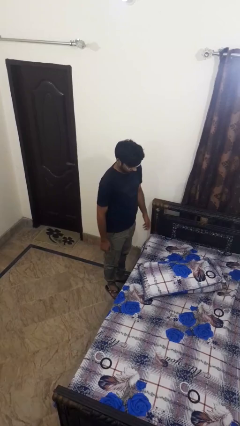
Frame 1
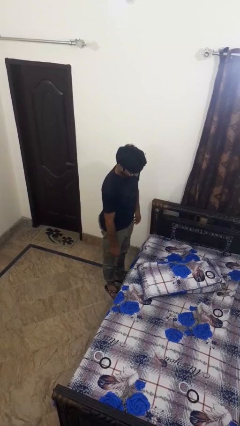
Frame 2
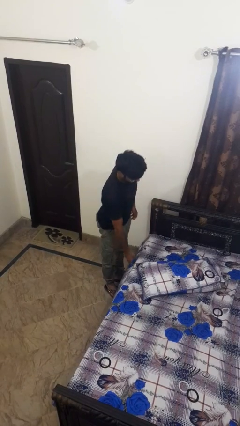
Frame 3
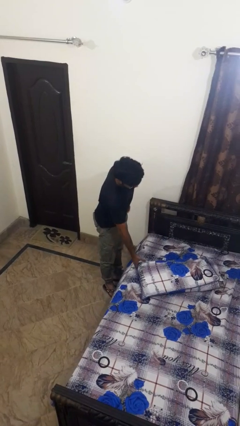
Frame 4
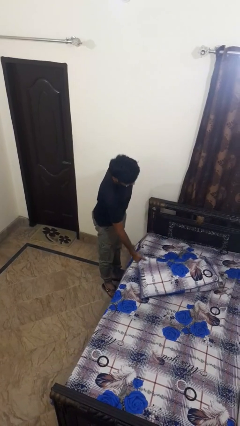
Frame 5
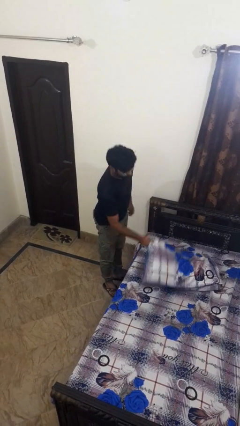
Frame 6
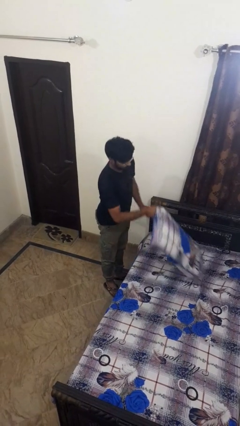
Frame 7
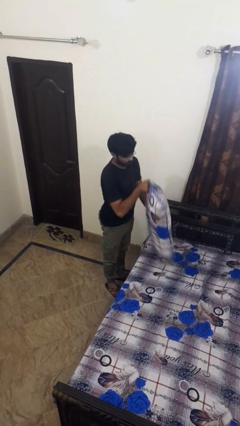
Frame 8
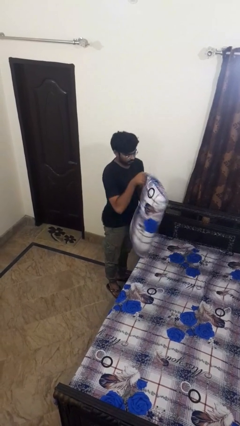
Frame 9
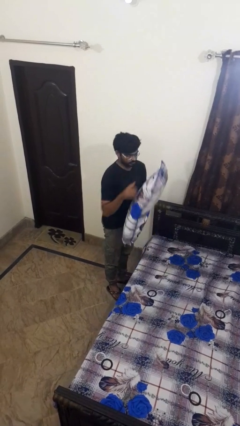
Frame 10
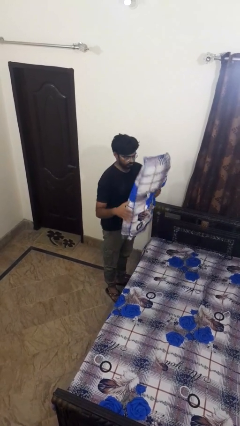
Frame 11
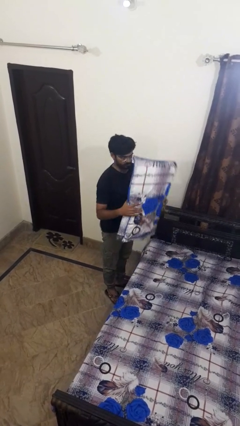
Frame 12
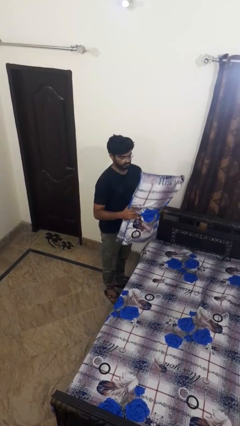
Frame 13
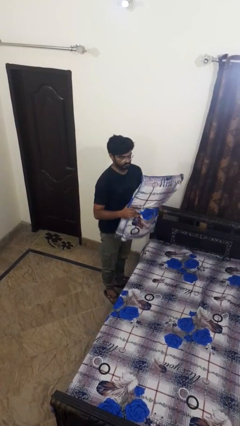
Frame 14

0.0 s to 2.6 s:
person picks up object from bed

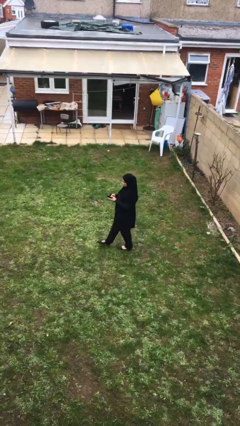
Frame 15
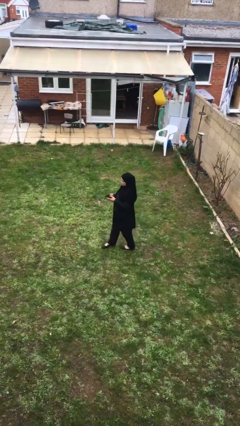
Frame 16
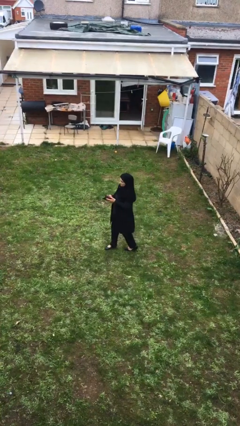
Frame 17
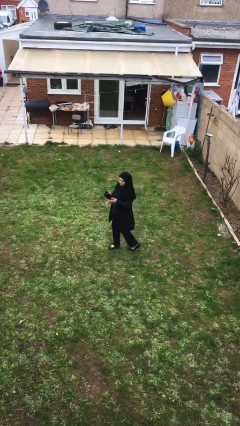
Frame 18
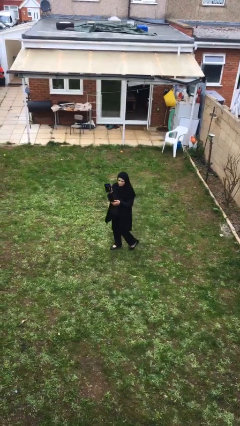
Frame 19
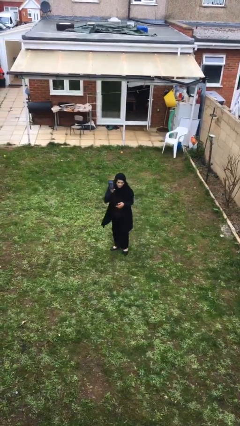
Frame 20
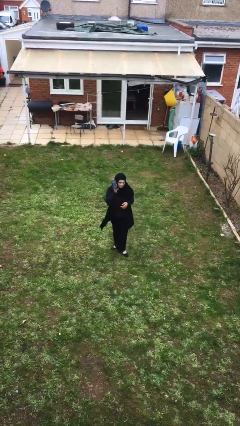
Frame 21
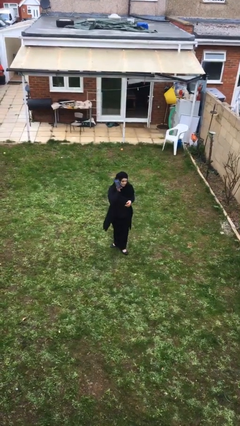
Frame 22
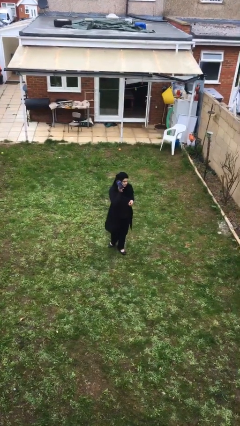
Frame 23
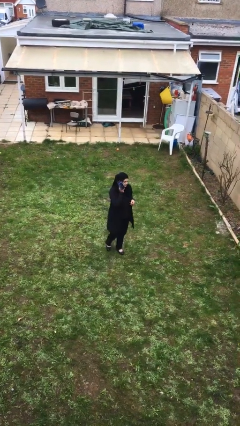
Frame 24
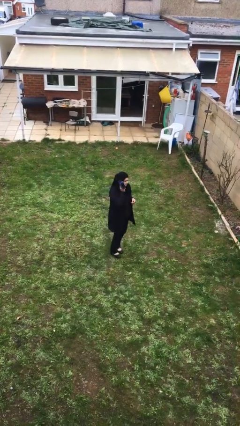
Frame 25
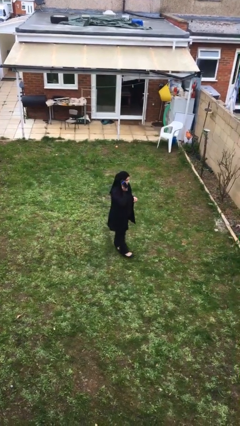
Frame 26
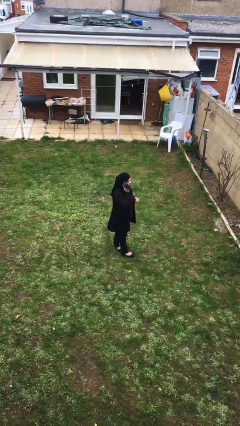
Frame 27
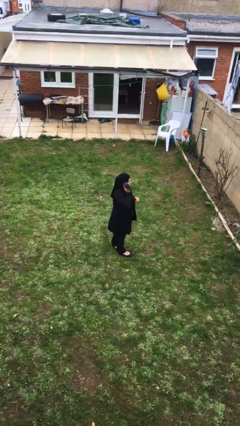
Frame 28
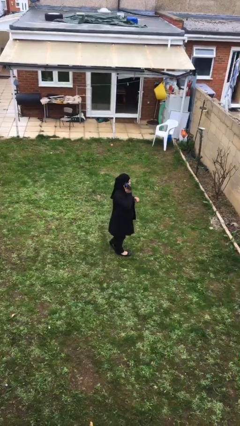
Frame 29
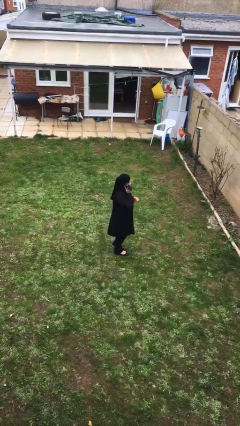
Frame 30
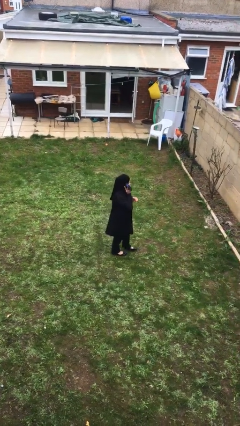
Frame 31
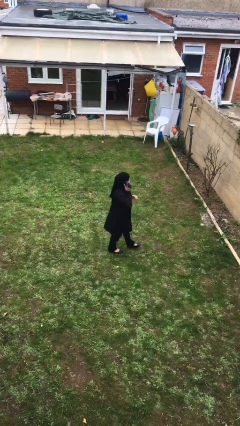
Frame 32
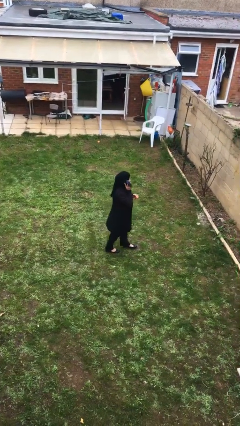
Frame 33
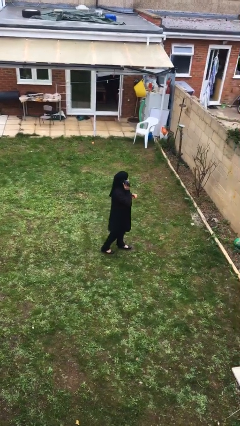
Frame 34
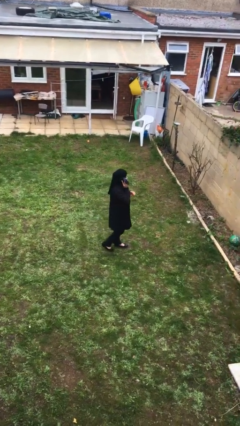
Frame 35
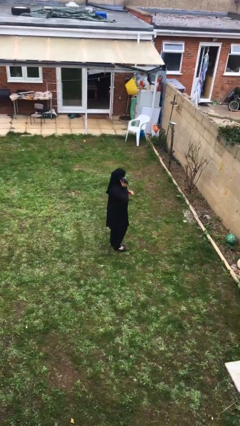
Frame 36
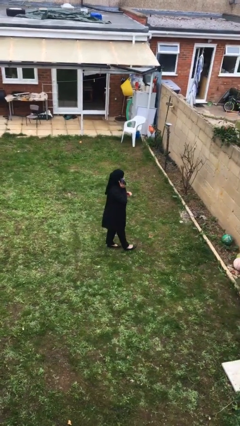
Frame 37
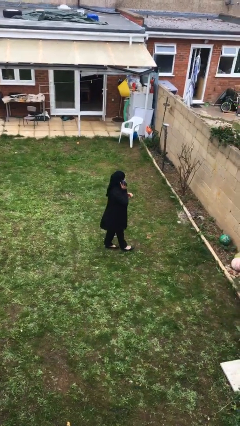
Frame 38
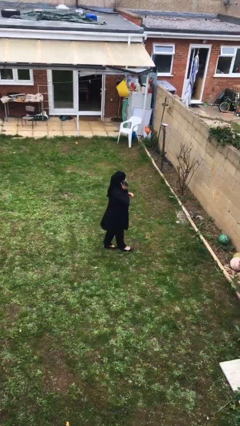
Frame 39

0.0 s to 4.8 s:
person talks on phone

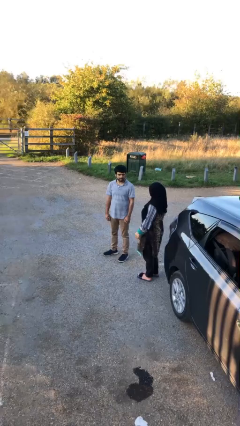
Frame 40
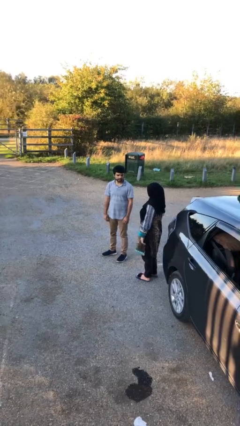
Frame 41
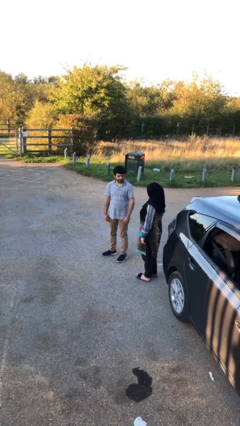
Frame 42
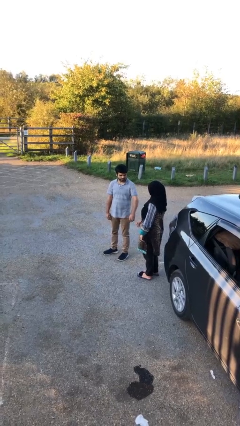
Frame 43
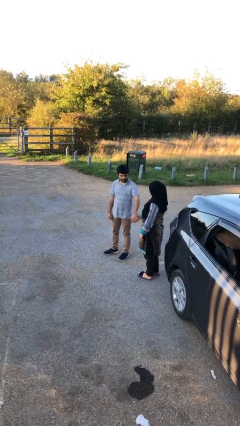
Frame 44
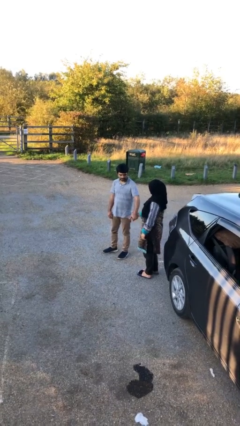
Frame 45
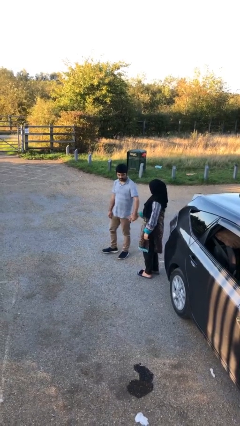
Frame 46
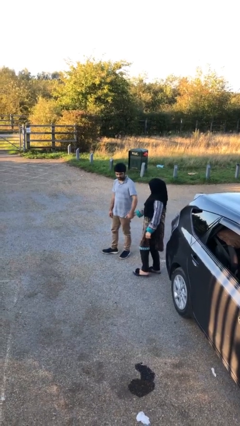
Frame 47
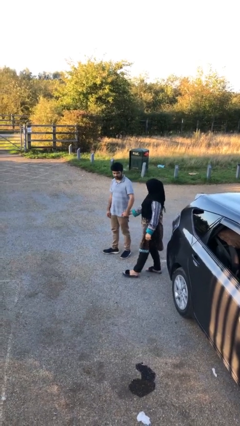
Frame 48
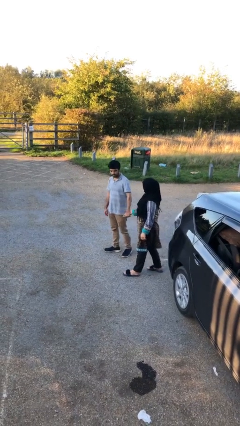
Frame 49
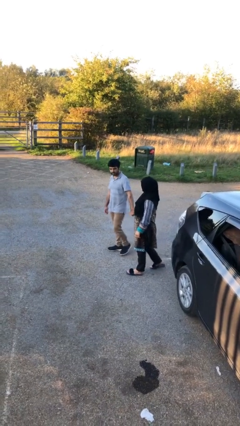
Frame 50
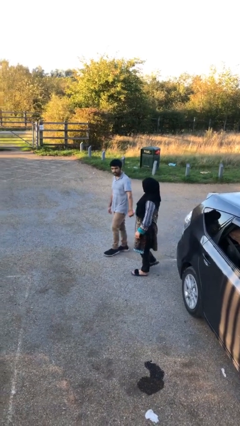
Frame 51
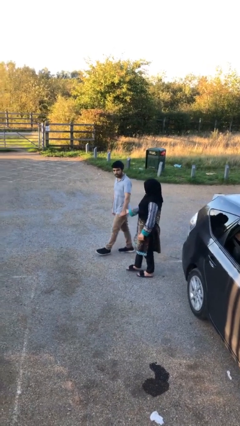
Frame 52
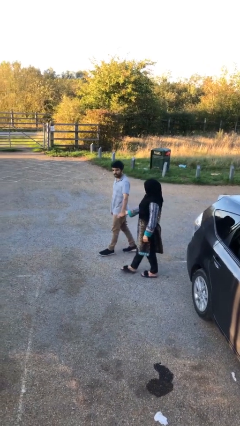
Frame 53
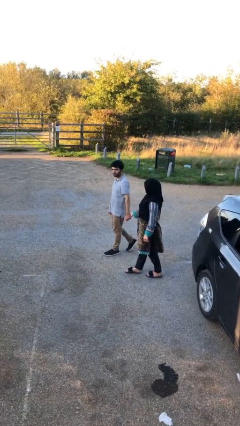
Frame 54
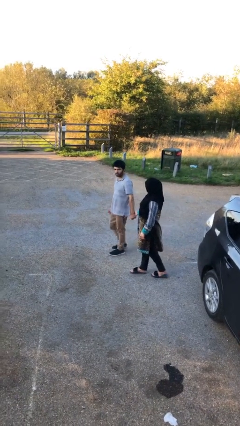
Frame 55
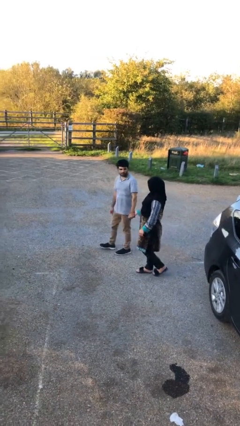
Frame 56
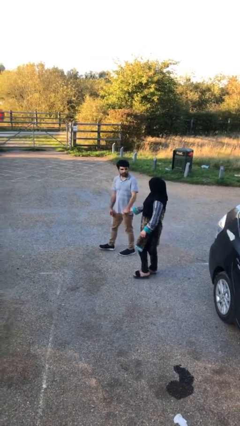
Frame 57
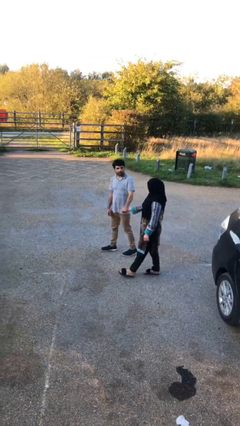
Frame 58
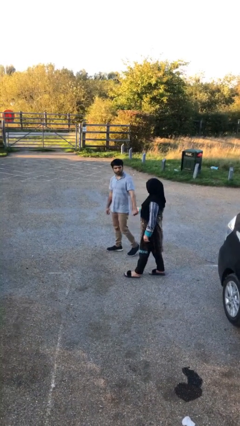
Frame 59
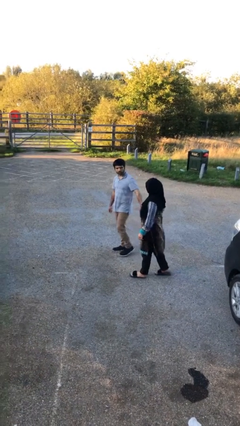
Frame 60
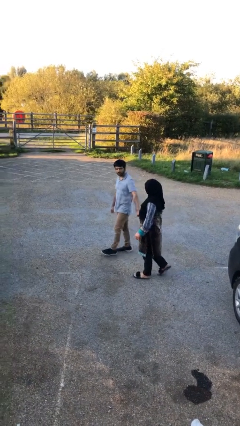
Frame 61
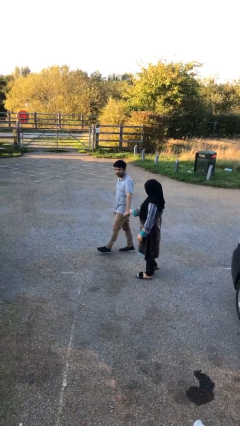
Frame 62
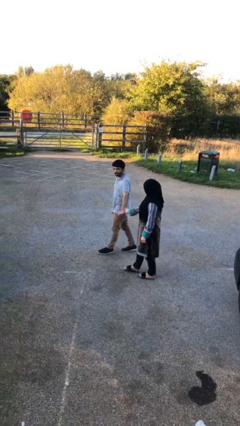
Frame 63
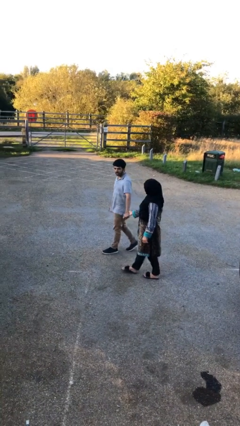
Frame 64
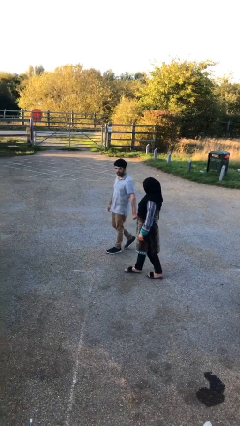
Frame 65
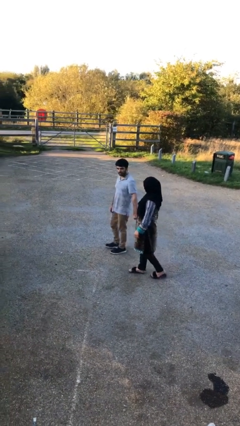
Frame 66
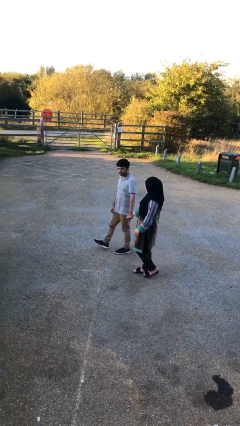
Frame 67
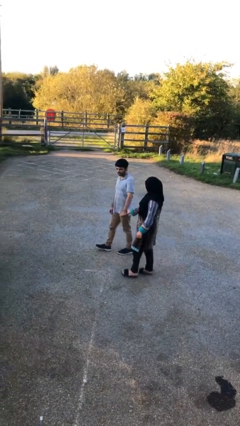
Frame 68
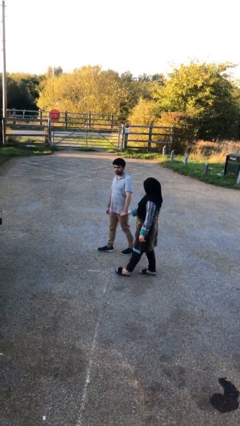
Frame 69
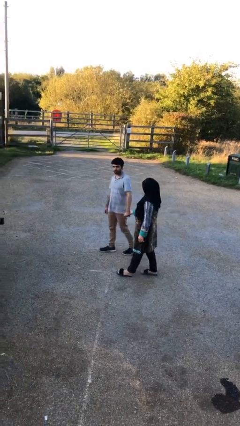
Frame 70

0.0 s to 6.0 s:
person holds hand

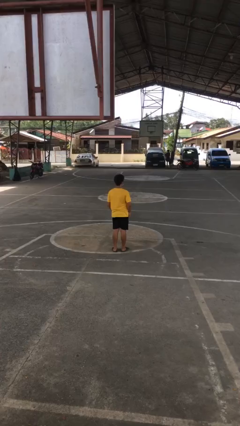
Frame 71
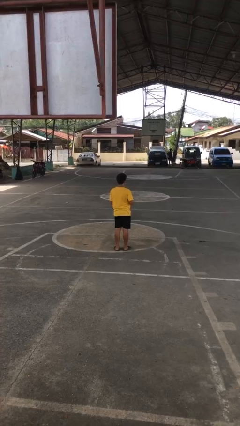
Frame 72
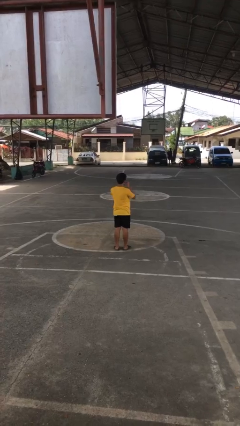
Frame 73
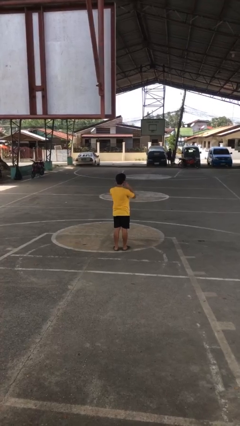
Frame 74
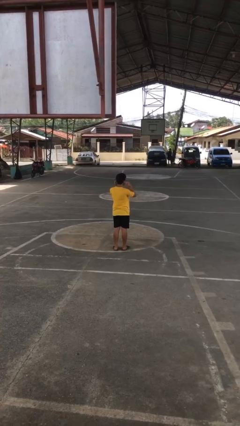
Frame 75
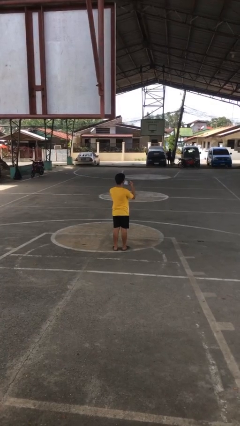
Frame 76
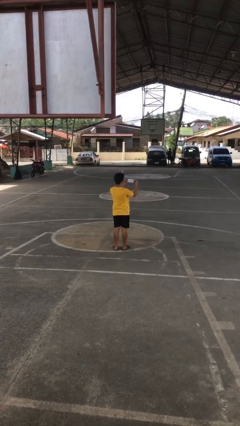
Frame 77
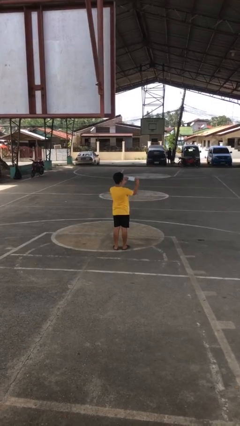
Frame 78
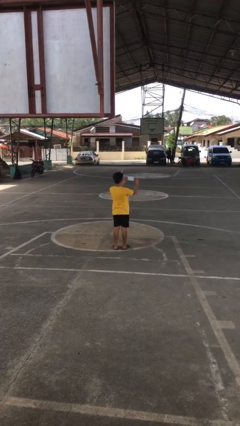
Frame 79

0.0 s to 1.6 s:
person takes off facemask

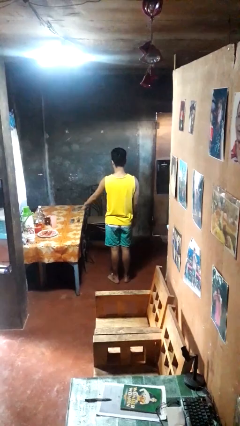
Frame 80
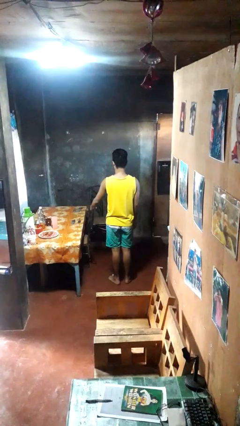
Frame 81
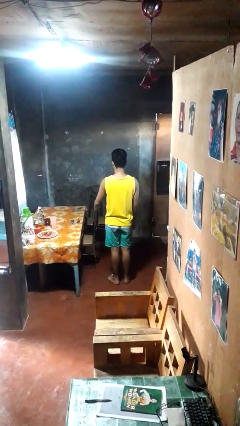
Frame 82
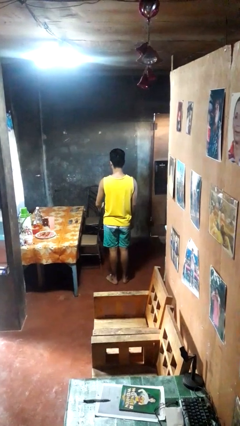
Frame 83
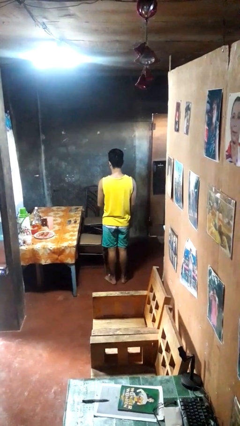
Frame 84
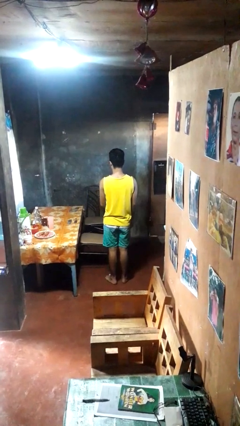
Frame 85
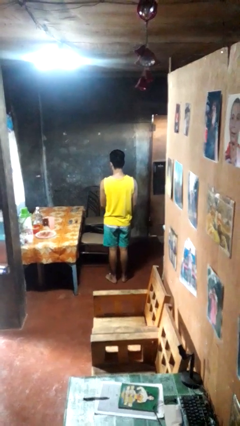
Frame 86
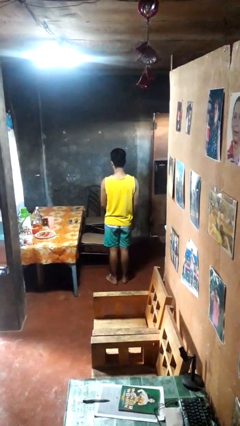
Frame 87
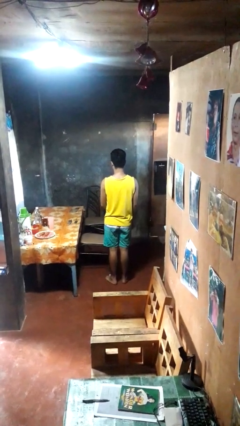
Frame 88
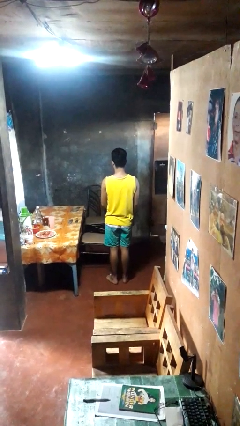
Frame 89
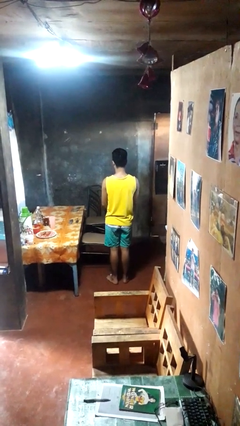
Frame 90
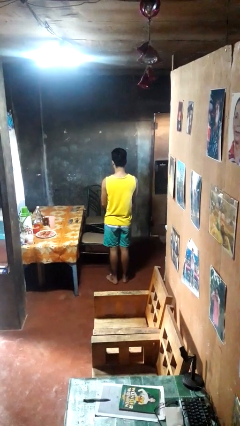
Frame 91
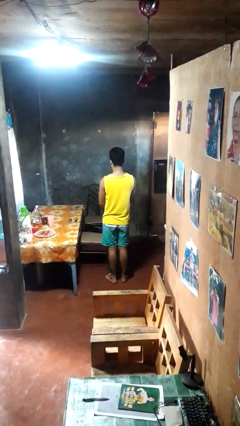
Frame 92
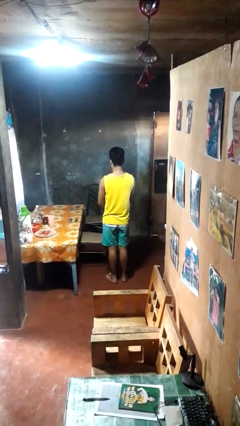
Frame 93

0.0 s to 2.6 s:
person pulls out chair
